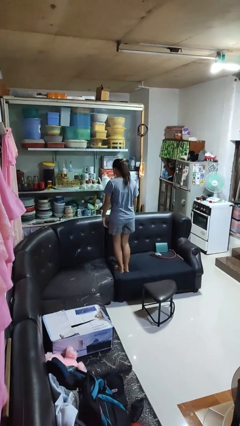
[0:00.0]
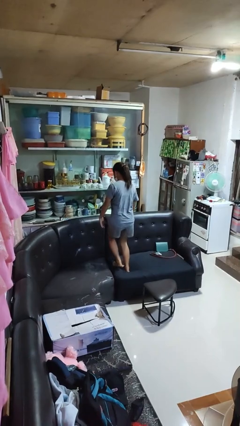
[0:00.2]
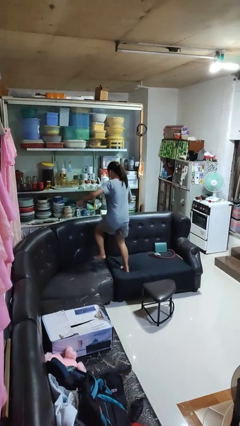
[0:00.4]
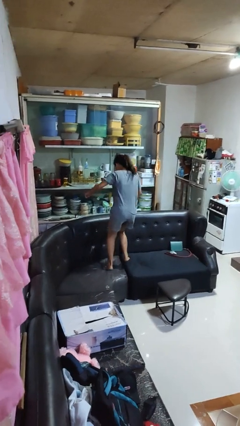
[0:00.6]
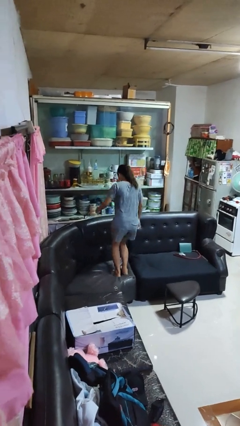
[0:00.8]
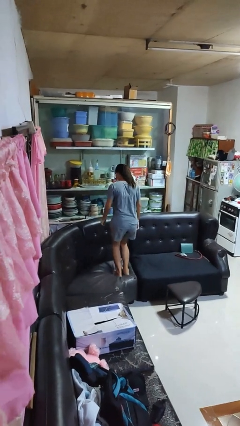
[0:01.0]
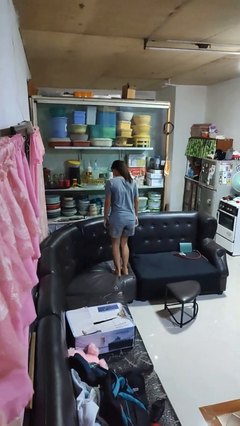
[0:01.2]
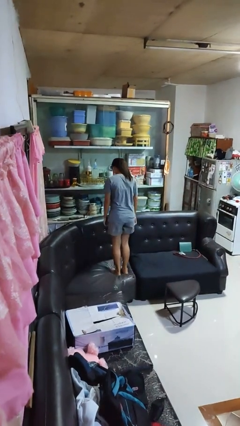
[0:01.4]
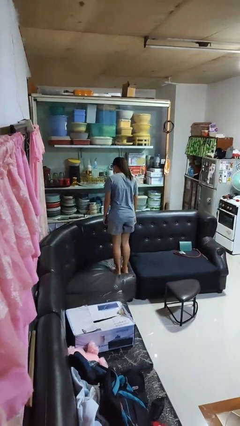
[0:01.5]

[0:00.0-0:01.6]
person jumps on couch

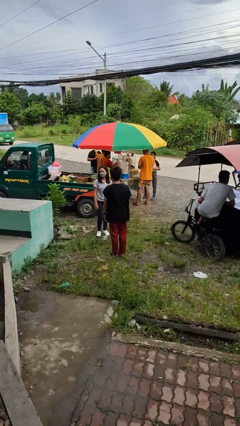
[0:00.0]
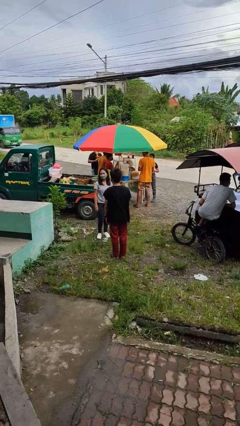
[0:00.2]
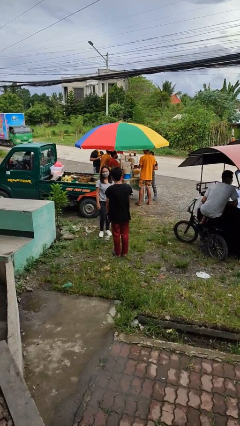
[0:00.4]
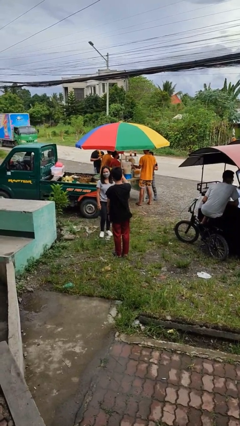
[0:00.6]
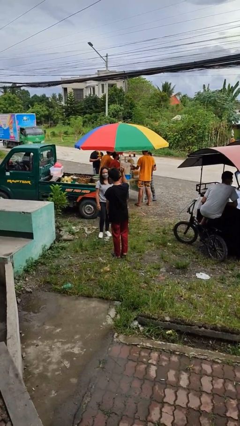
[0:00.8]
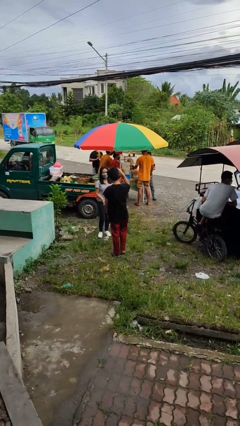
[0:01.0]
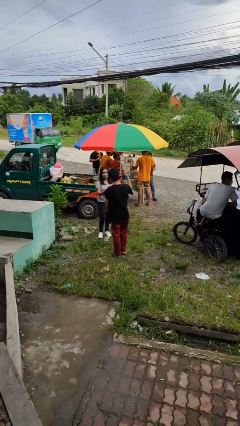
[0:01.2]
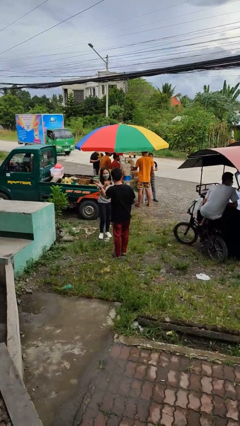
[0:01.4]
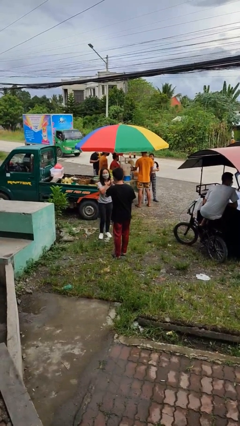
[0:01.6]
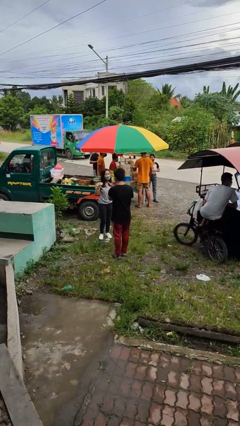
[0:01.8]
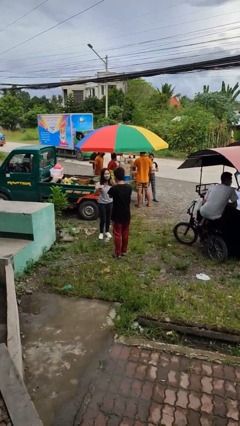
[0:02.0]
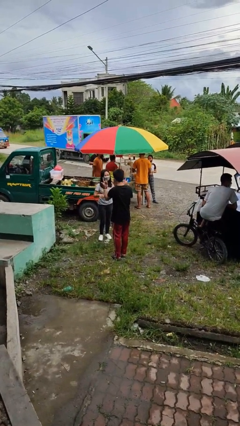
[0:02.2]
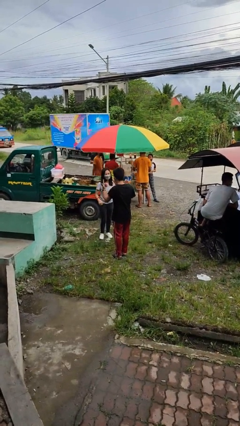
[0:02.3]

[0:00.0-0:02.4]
person talks to person

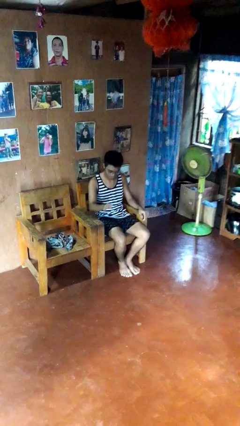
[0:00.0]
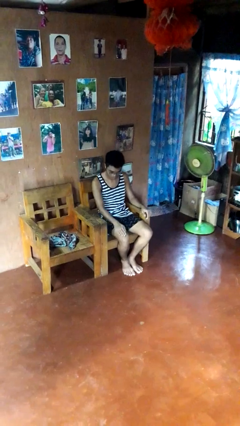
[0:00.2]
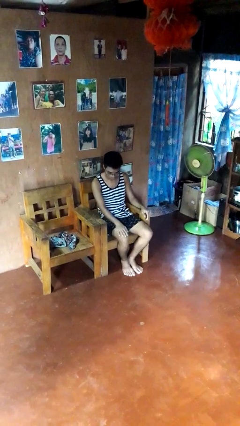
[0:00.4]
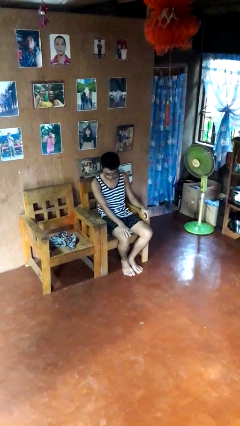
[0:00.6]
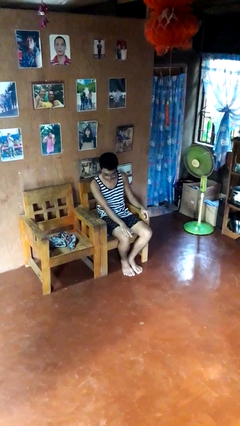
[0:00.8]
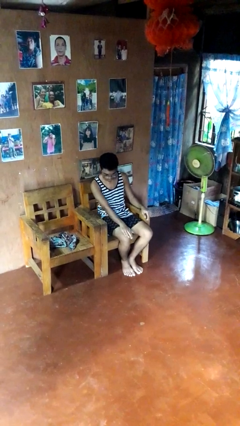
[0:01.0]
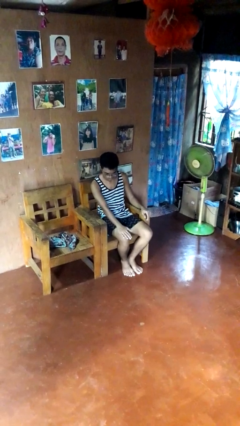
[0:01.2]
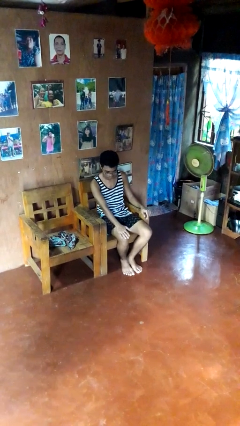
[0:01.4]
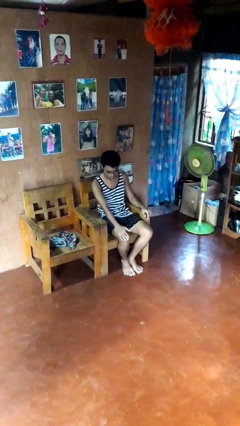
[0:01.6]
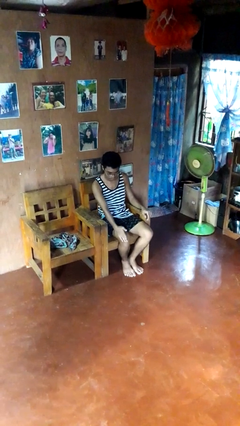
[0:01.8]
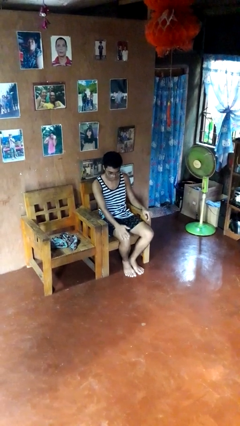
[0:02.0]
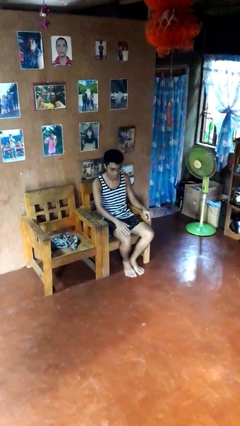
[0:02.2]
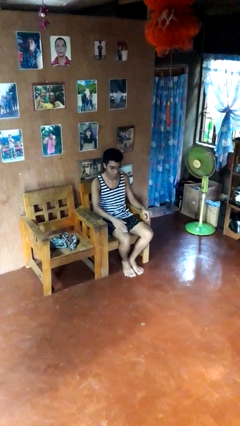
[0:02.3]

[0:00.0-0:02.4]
person swats bug

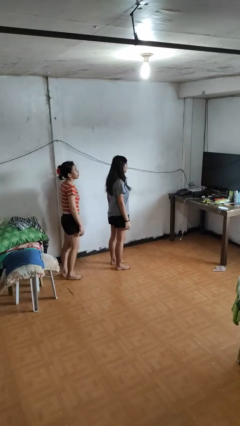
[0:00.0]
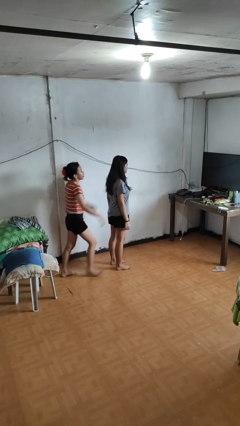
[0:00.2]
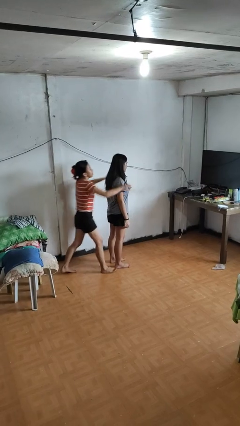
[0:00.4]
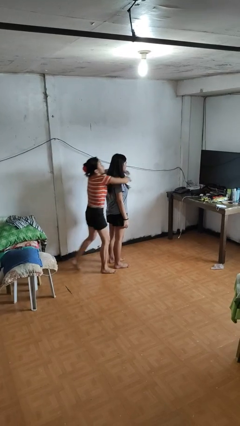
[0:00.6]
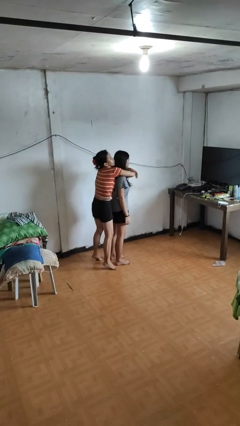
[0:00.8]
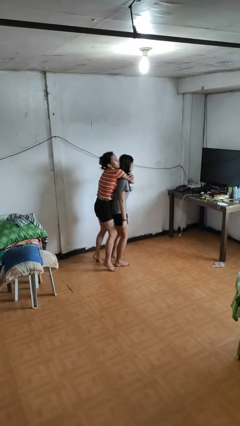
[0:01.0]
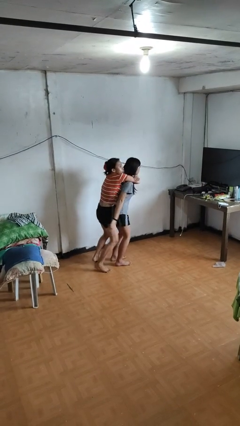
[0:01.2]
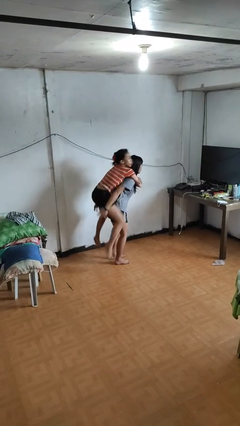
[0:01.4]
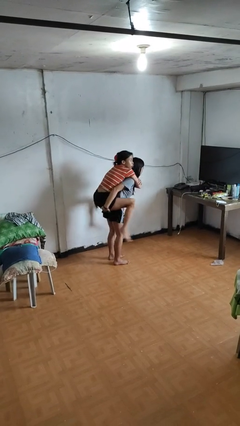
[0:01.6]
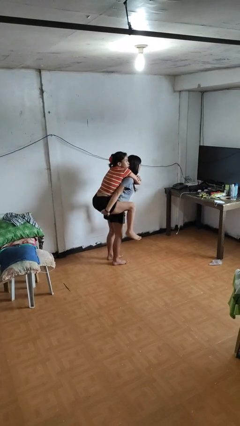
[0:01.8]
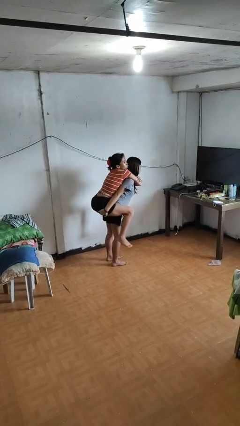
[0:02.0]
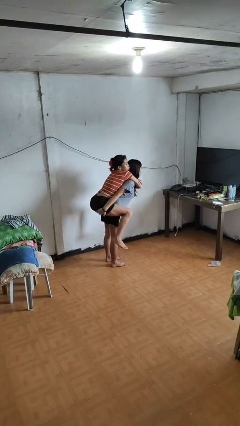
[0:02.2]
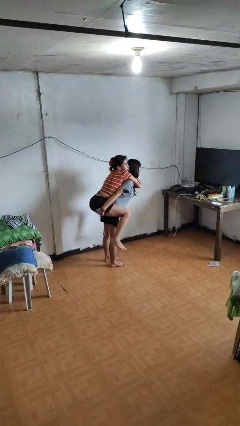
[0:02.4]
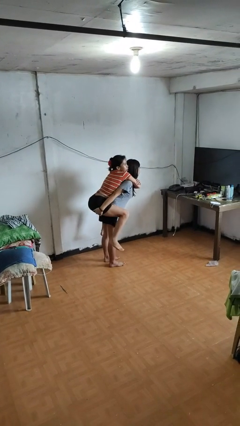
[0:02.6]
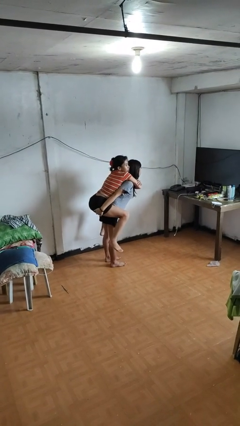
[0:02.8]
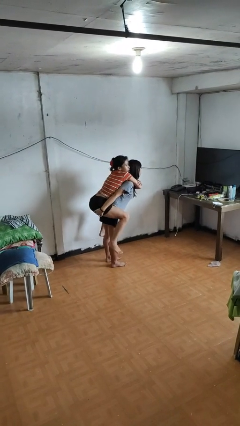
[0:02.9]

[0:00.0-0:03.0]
person carries person over shoulder

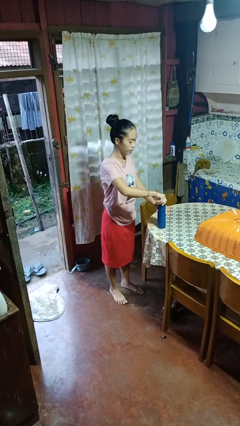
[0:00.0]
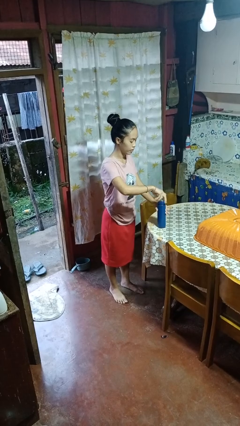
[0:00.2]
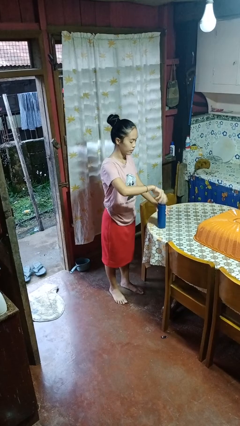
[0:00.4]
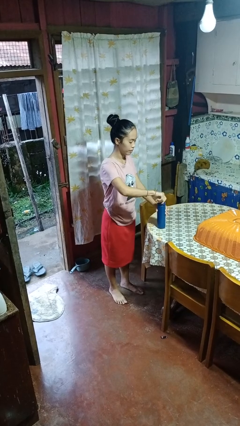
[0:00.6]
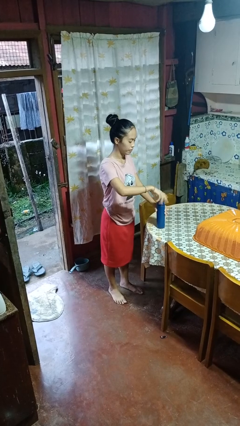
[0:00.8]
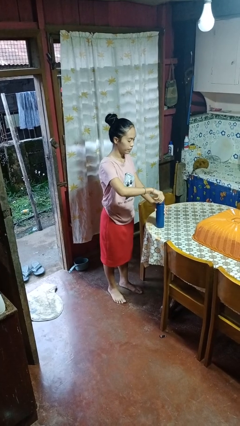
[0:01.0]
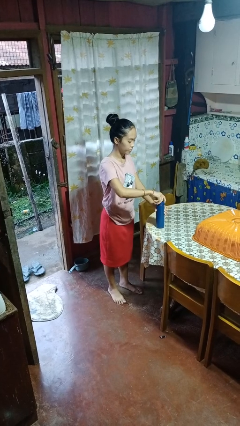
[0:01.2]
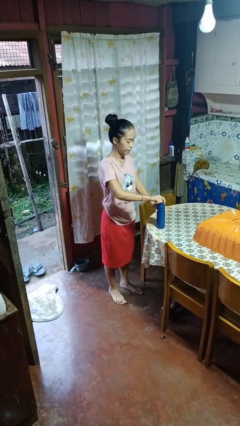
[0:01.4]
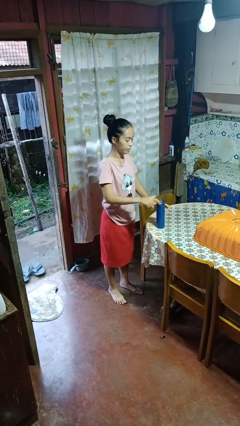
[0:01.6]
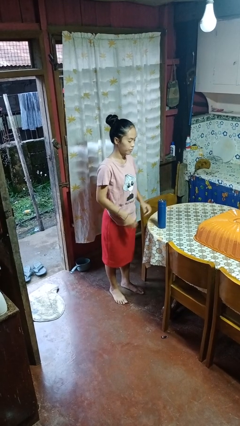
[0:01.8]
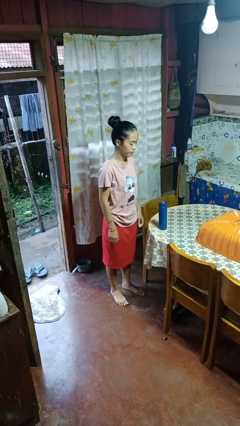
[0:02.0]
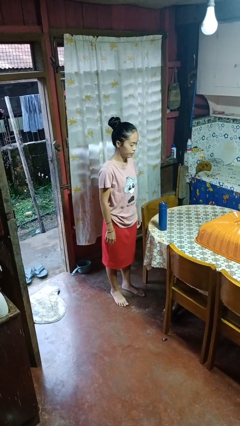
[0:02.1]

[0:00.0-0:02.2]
person closes jar

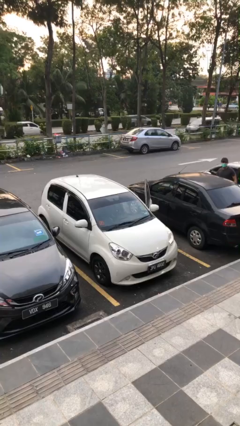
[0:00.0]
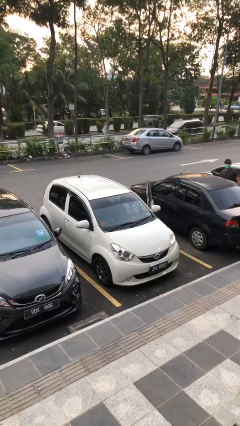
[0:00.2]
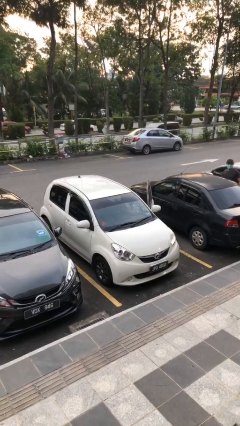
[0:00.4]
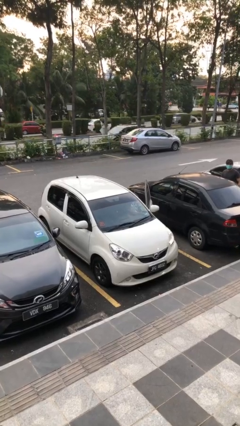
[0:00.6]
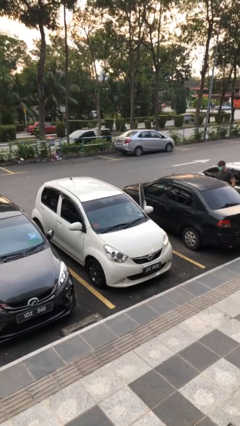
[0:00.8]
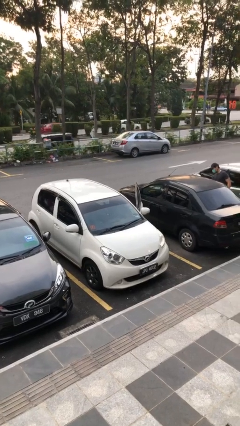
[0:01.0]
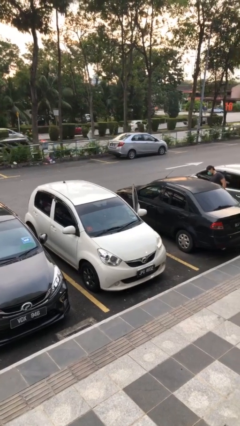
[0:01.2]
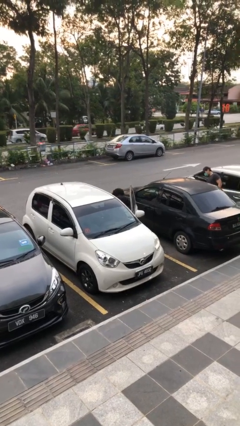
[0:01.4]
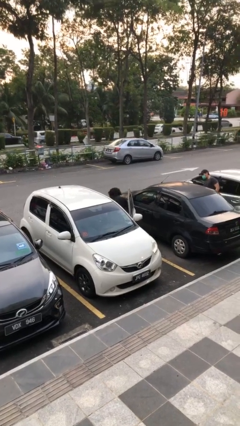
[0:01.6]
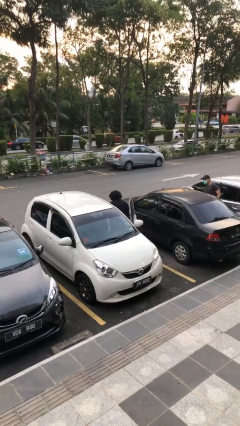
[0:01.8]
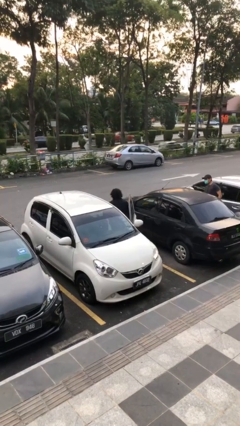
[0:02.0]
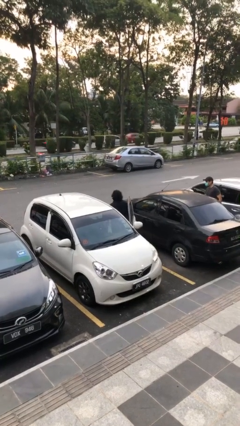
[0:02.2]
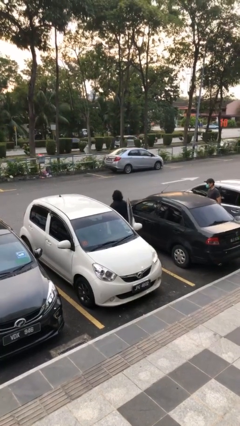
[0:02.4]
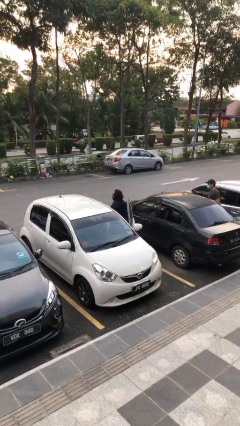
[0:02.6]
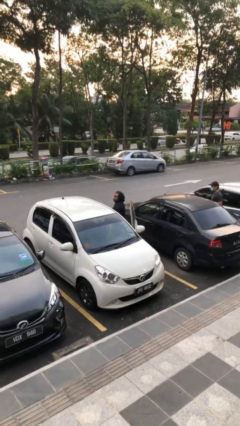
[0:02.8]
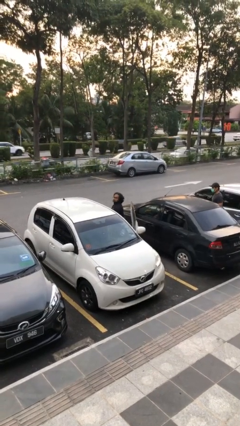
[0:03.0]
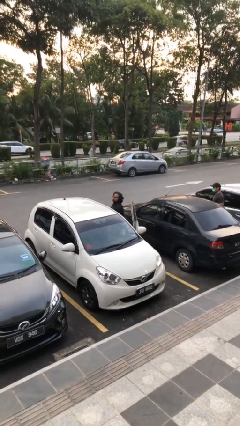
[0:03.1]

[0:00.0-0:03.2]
person exits car

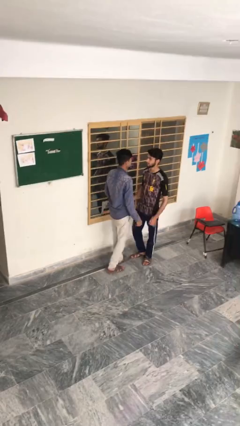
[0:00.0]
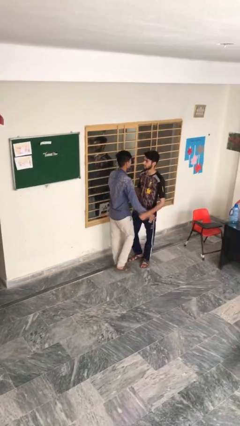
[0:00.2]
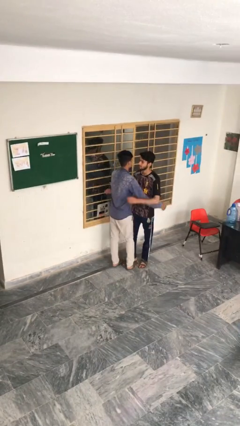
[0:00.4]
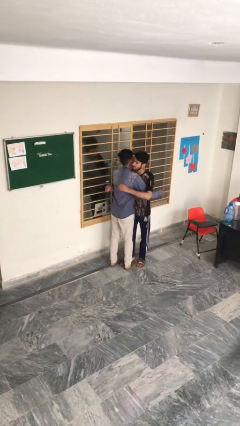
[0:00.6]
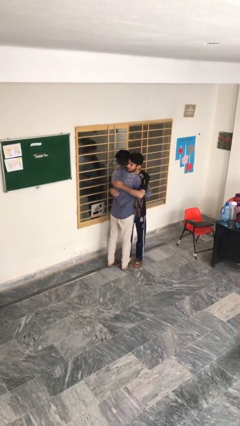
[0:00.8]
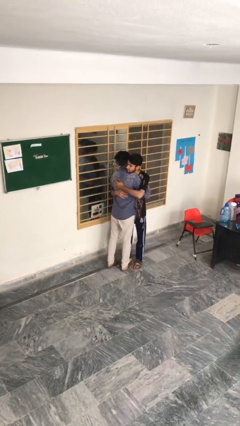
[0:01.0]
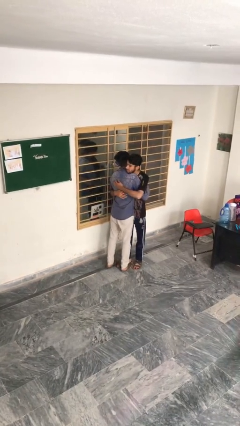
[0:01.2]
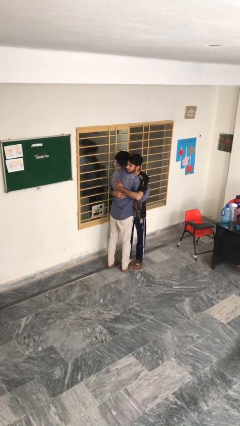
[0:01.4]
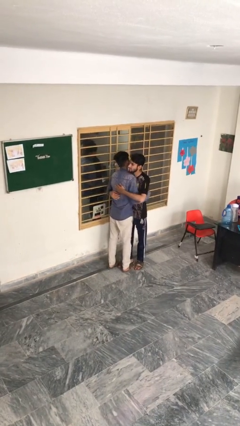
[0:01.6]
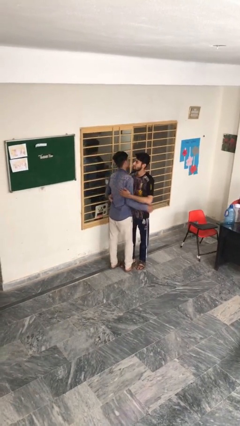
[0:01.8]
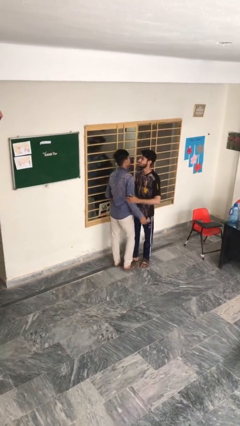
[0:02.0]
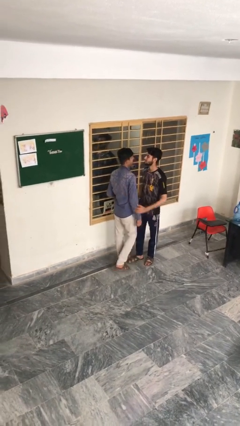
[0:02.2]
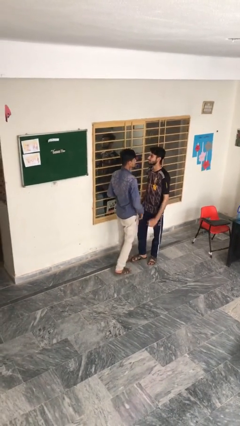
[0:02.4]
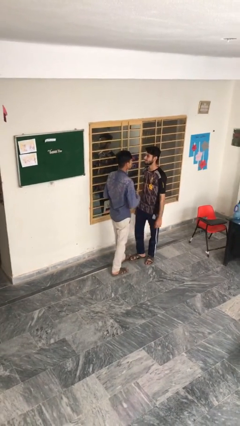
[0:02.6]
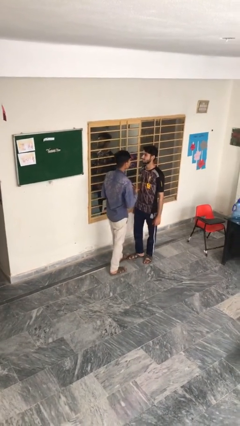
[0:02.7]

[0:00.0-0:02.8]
person embraces person
